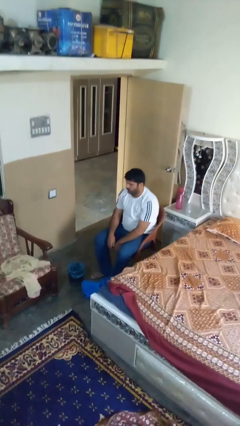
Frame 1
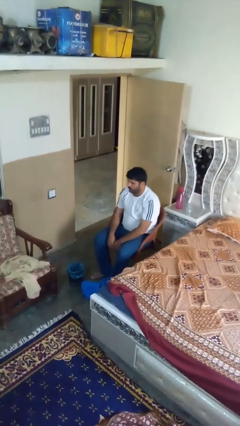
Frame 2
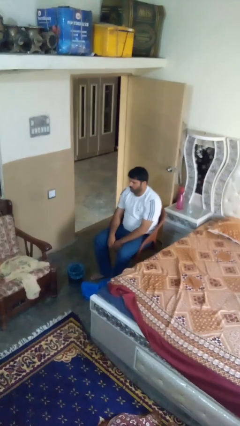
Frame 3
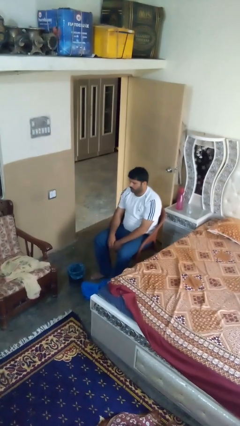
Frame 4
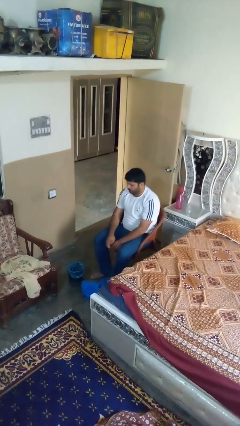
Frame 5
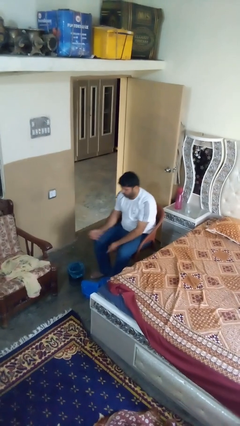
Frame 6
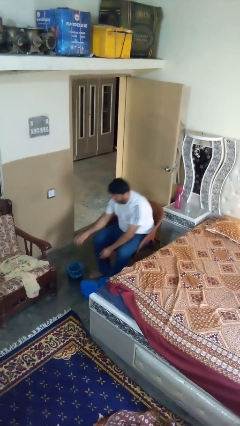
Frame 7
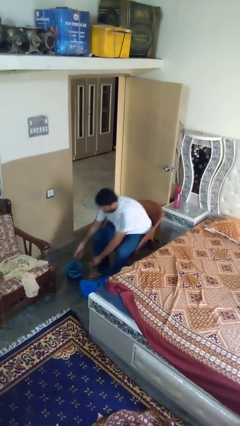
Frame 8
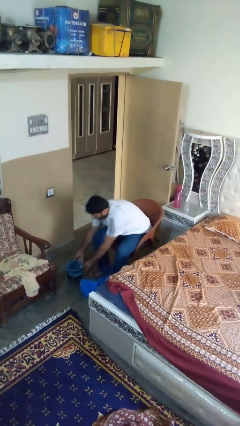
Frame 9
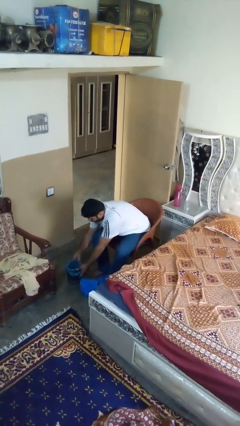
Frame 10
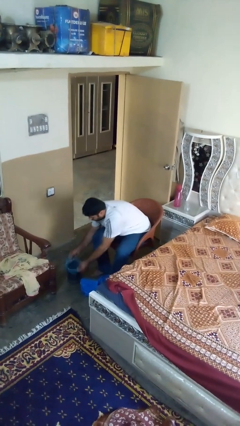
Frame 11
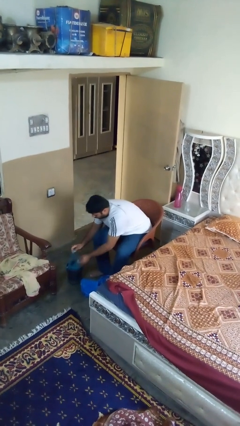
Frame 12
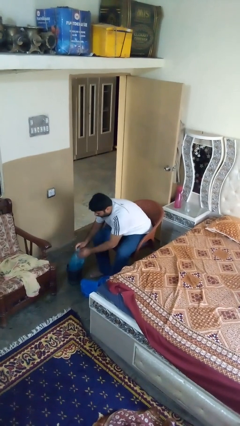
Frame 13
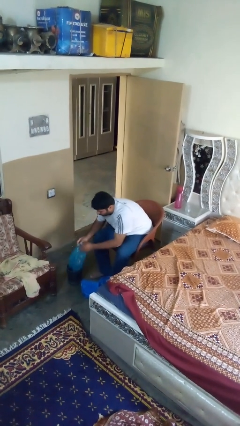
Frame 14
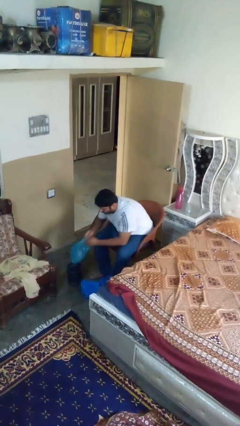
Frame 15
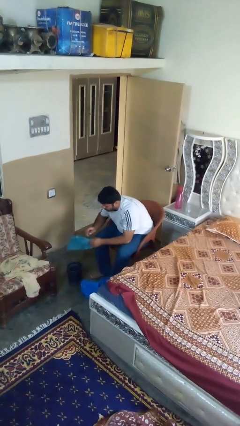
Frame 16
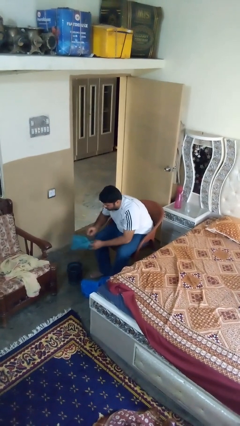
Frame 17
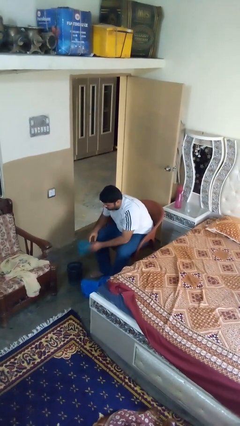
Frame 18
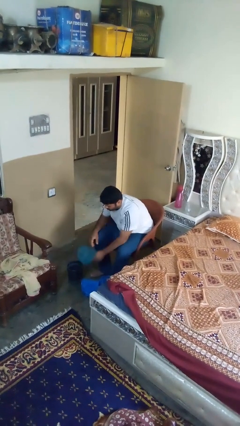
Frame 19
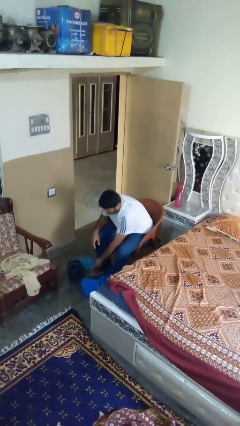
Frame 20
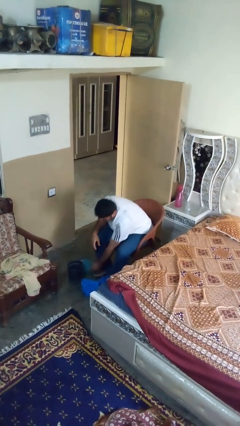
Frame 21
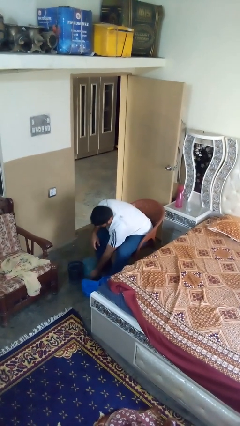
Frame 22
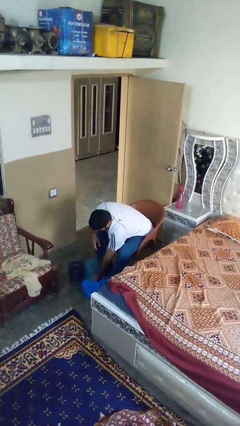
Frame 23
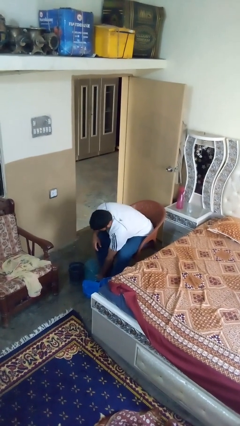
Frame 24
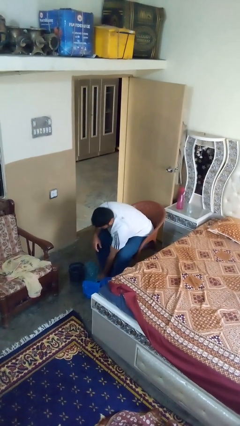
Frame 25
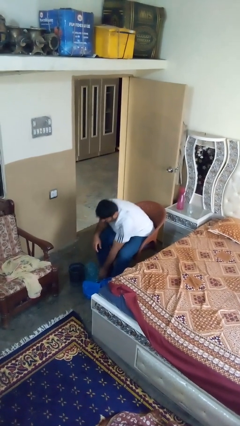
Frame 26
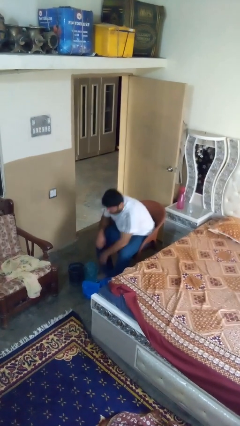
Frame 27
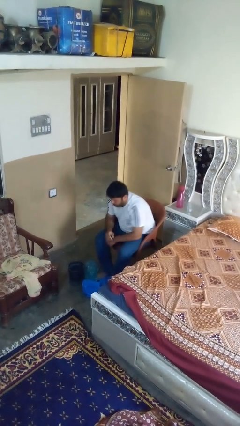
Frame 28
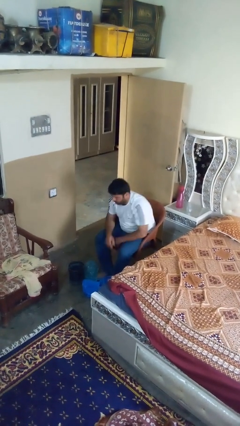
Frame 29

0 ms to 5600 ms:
person removes trashbag from trashcan

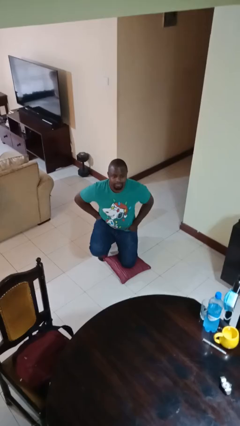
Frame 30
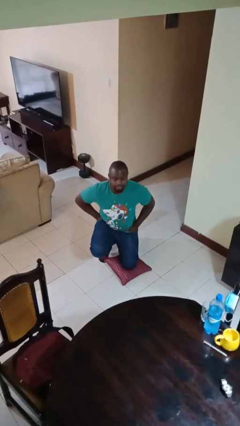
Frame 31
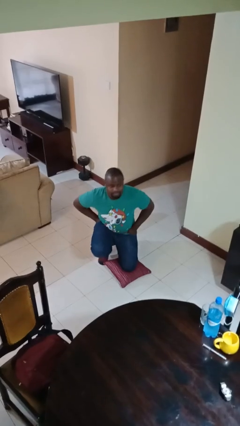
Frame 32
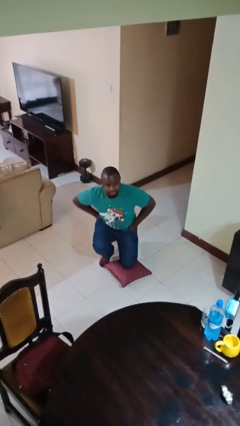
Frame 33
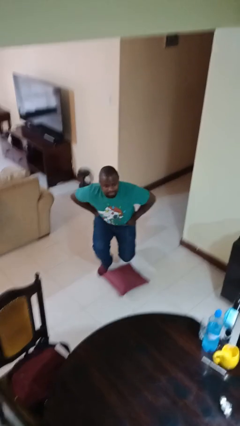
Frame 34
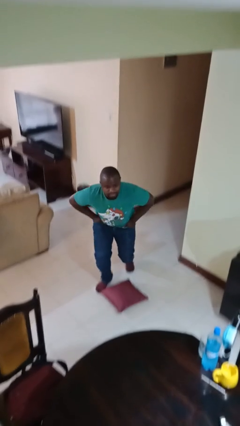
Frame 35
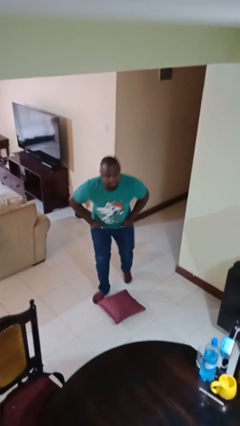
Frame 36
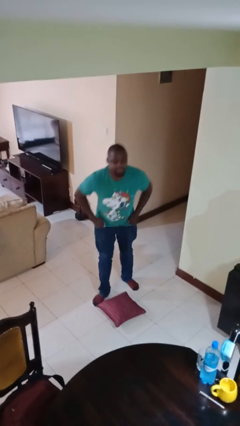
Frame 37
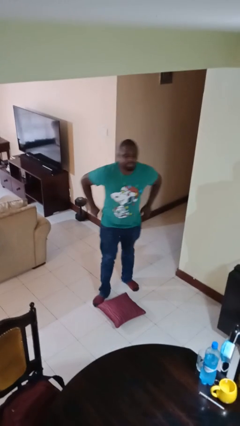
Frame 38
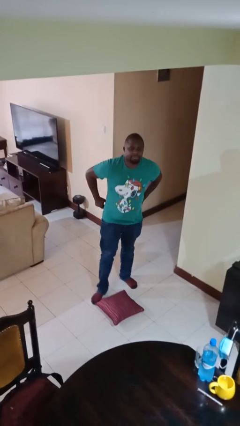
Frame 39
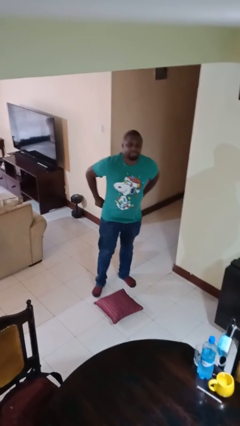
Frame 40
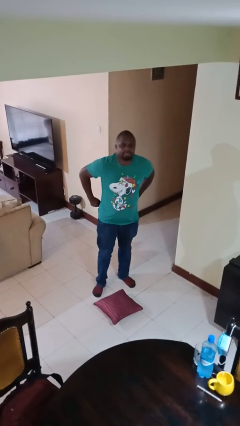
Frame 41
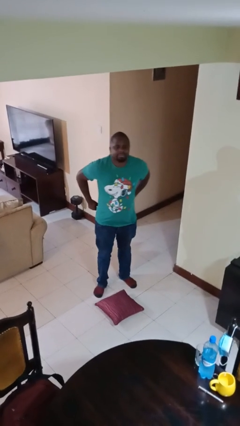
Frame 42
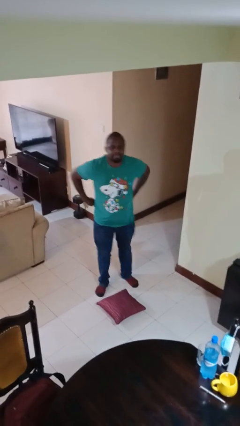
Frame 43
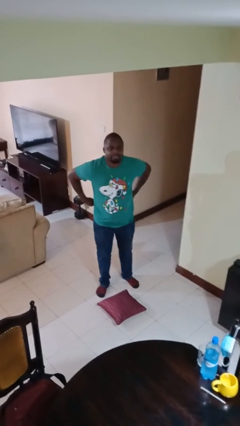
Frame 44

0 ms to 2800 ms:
person stands up from floor

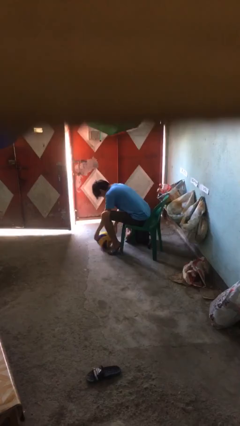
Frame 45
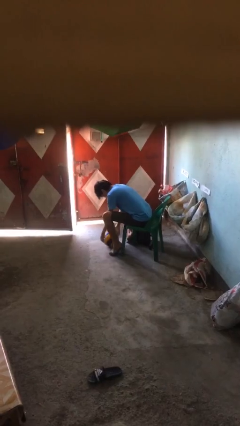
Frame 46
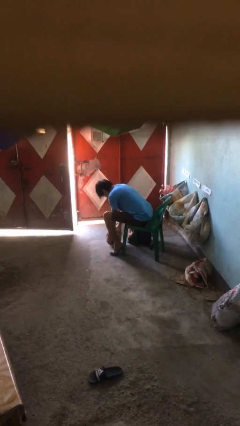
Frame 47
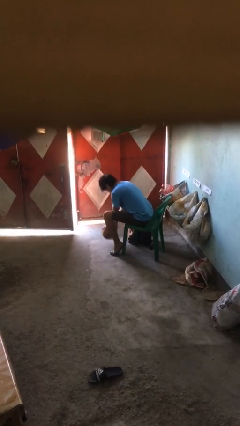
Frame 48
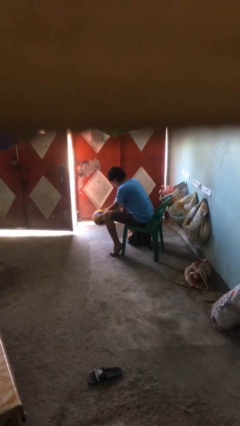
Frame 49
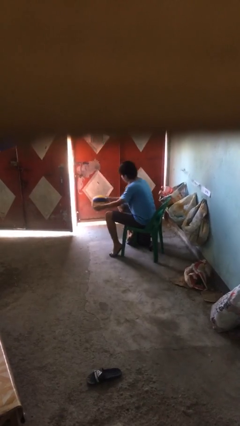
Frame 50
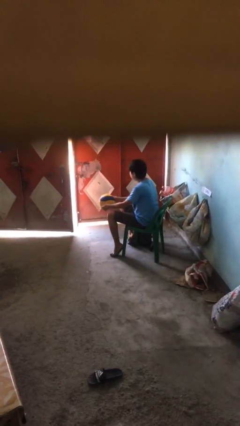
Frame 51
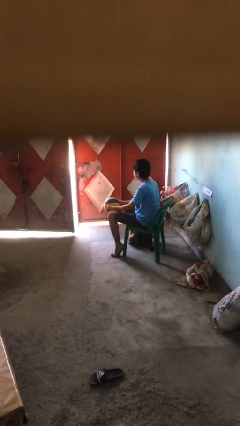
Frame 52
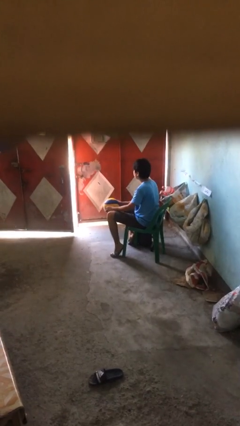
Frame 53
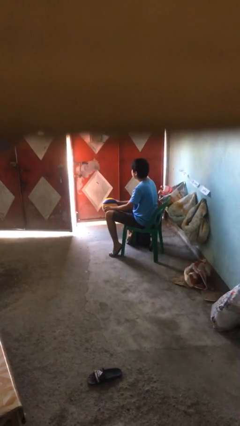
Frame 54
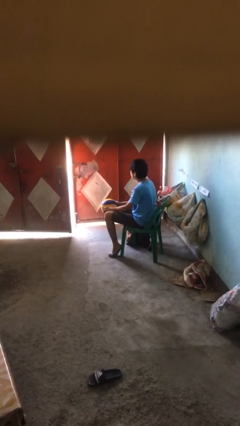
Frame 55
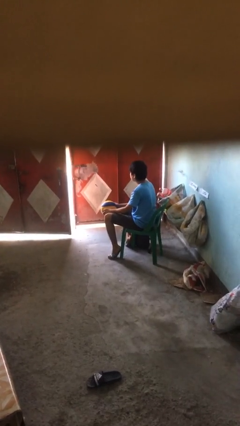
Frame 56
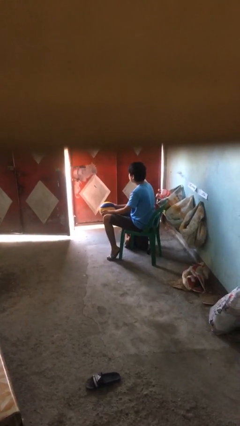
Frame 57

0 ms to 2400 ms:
person picks up object from floor

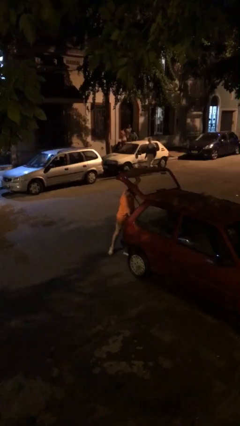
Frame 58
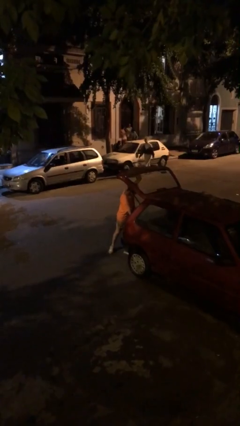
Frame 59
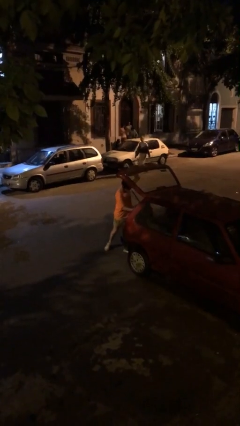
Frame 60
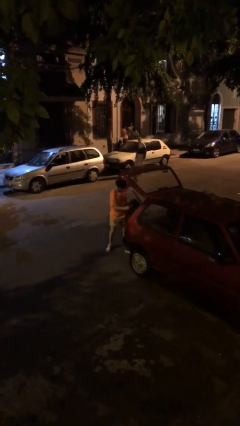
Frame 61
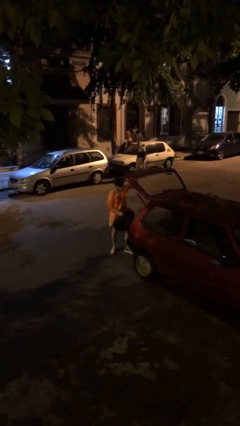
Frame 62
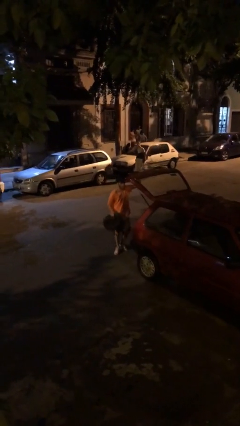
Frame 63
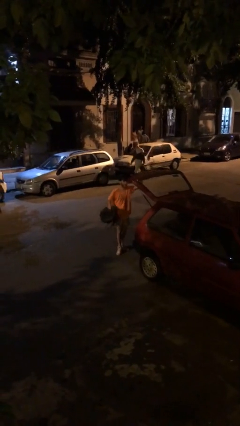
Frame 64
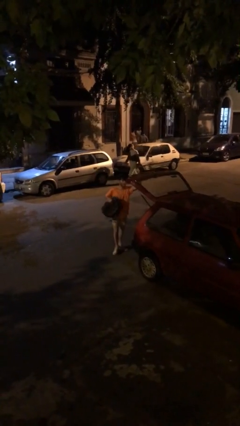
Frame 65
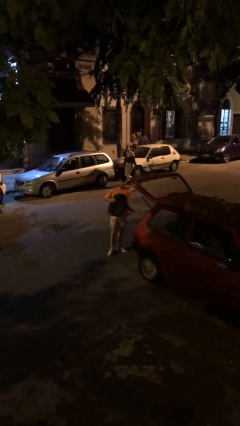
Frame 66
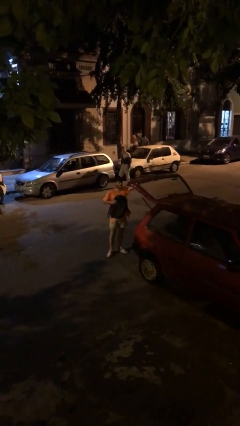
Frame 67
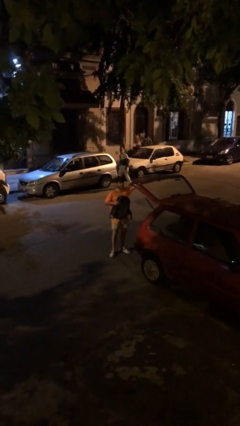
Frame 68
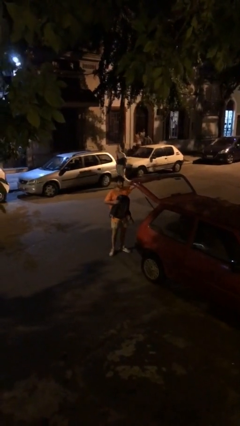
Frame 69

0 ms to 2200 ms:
person unloads car

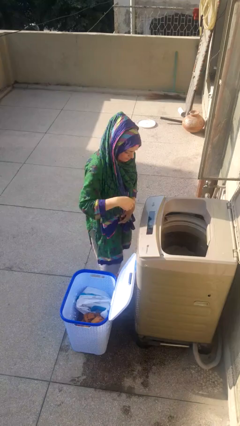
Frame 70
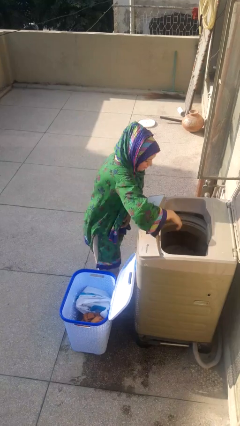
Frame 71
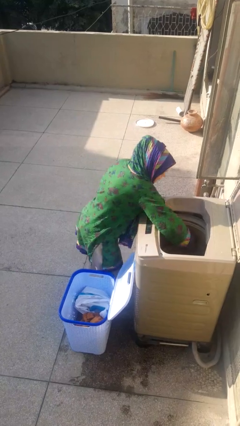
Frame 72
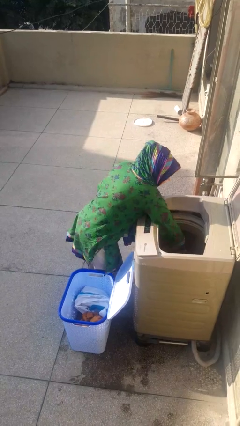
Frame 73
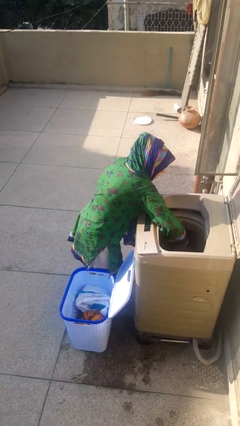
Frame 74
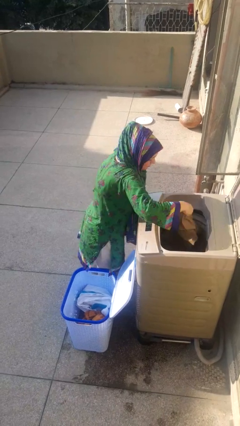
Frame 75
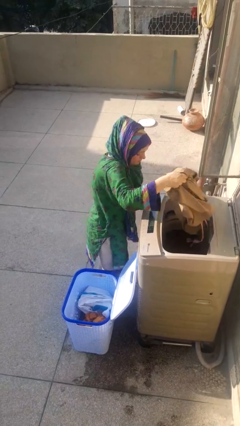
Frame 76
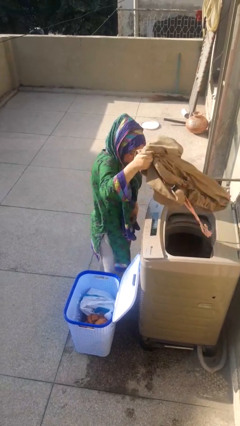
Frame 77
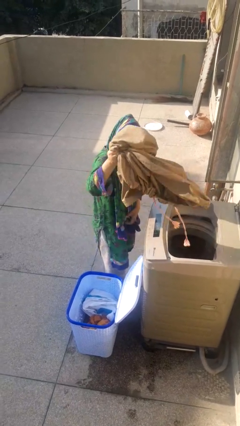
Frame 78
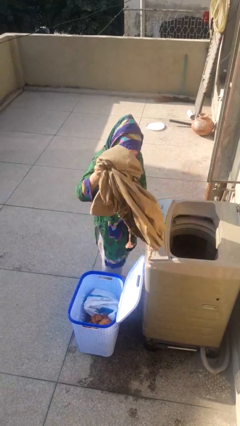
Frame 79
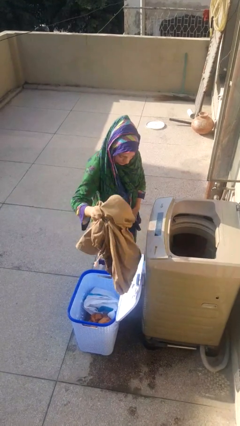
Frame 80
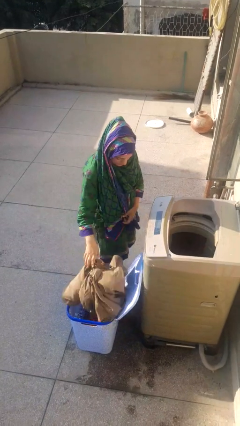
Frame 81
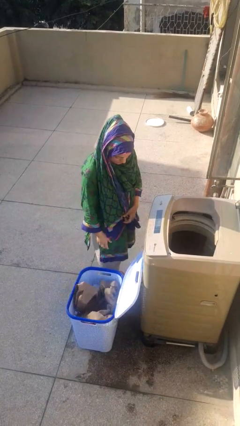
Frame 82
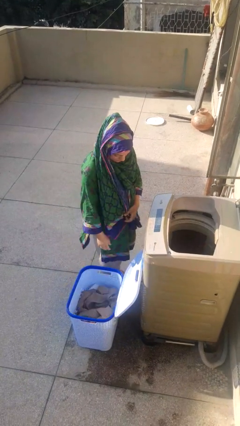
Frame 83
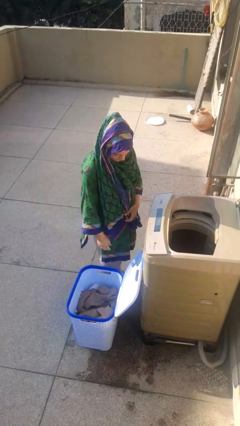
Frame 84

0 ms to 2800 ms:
person unloads clotheswasher

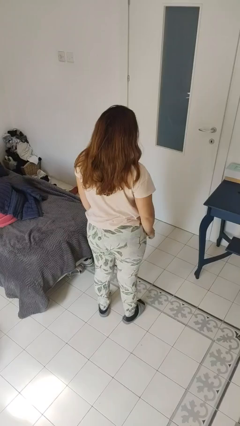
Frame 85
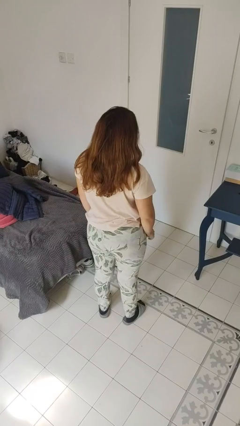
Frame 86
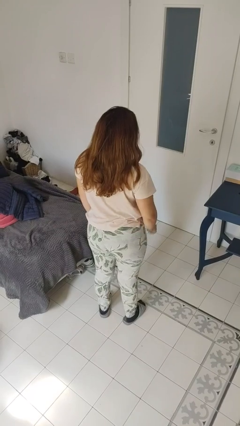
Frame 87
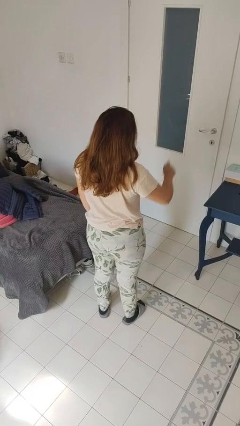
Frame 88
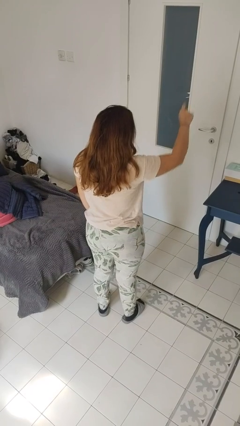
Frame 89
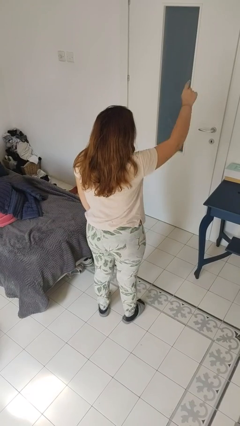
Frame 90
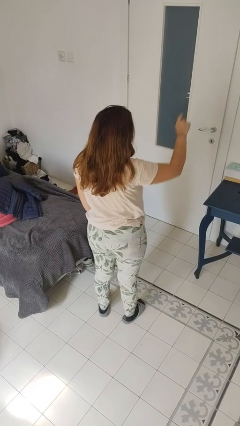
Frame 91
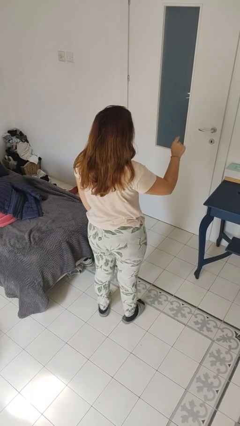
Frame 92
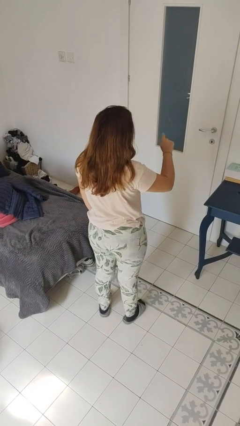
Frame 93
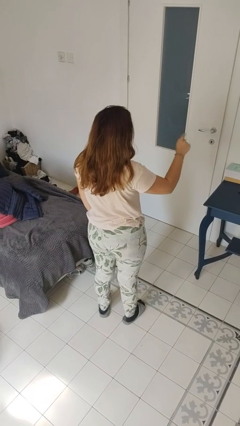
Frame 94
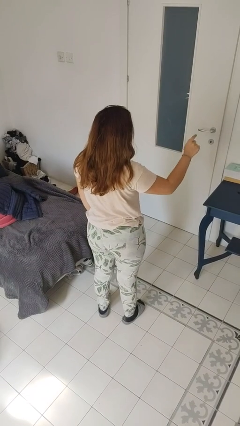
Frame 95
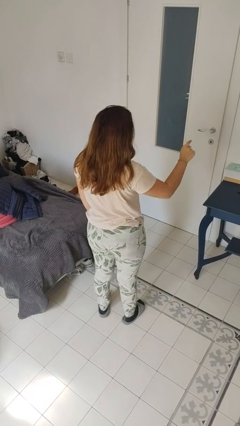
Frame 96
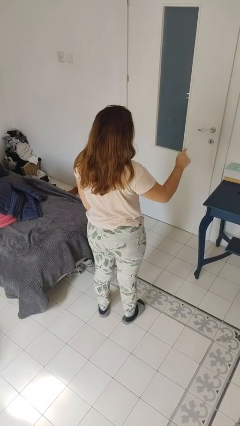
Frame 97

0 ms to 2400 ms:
person gestures number one
